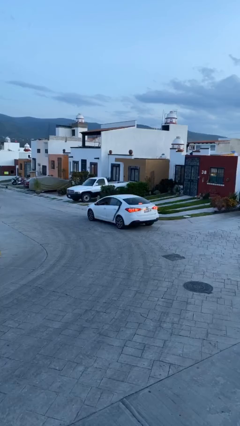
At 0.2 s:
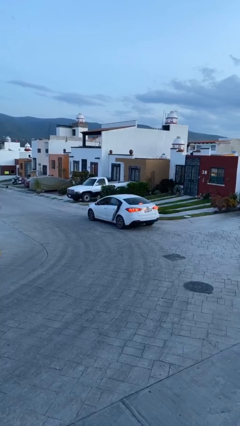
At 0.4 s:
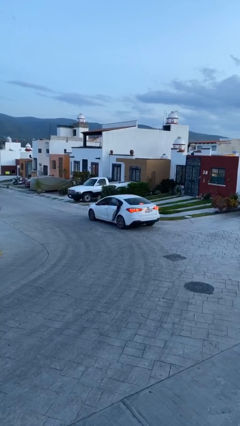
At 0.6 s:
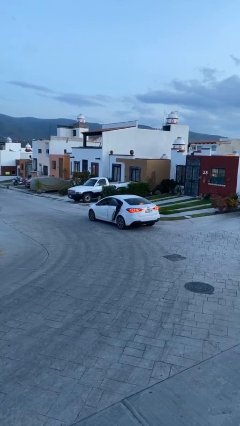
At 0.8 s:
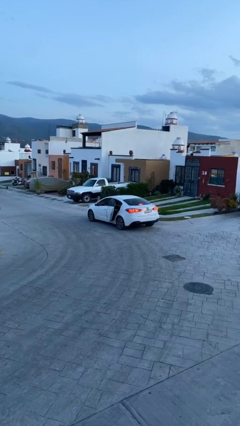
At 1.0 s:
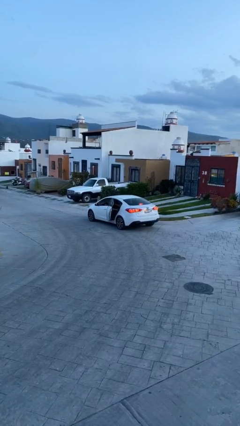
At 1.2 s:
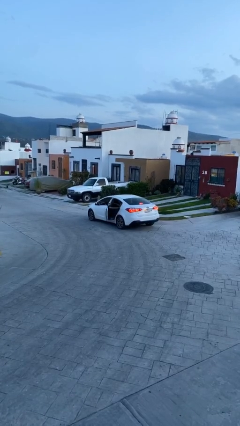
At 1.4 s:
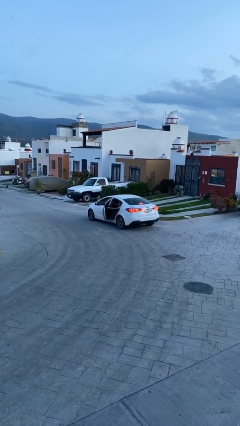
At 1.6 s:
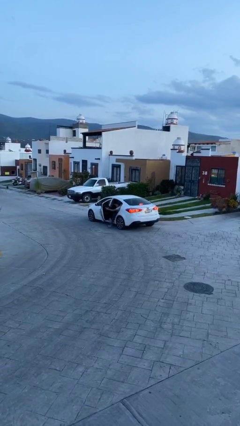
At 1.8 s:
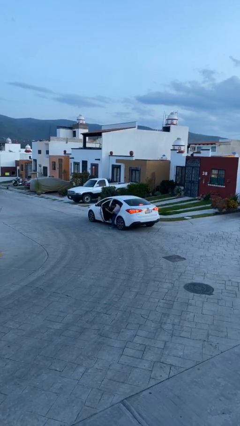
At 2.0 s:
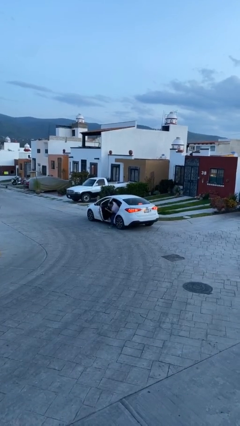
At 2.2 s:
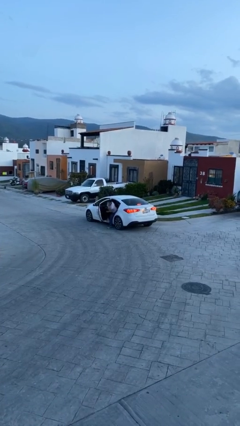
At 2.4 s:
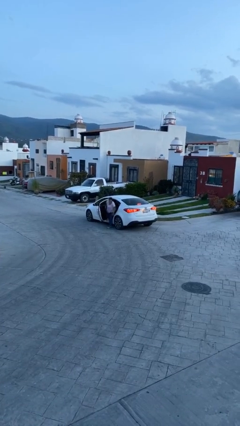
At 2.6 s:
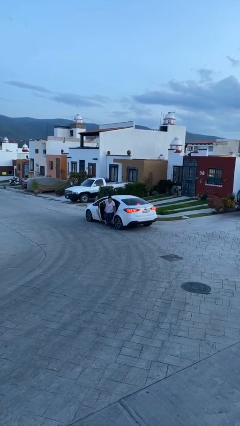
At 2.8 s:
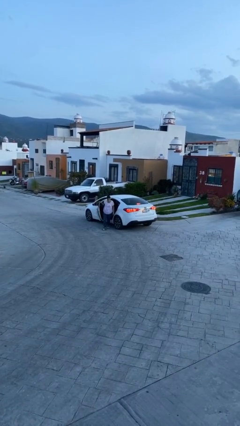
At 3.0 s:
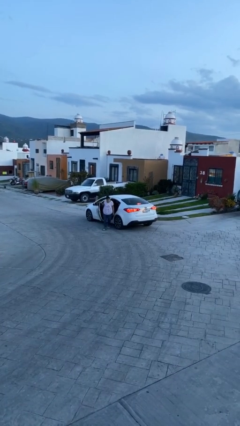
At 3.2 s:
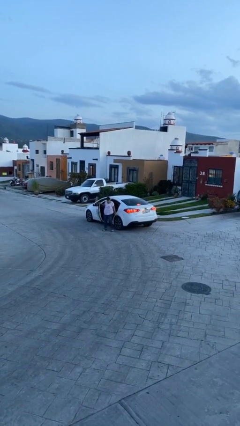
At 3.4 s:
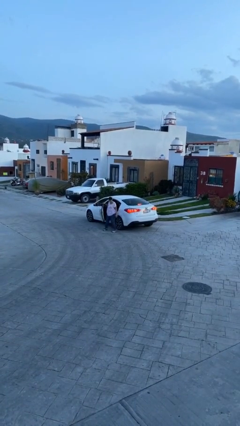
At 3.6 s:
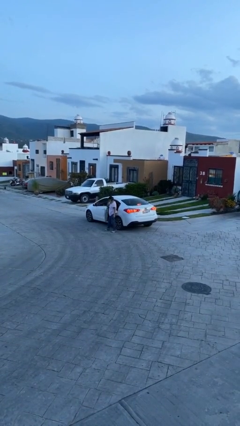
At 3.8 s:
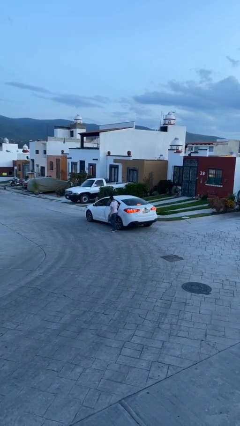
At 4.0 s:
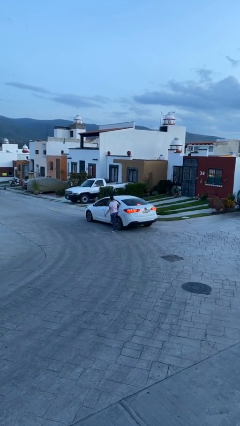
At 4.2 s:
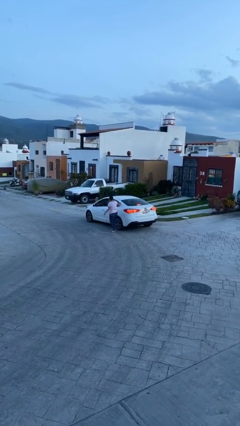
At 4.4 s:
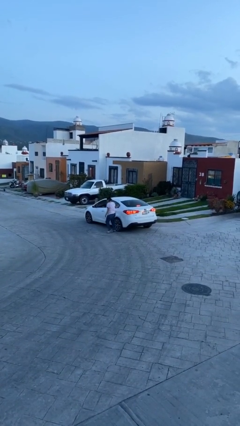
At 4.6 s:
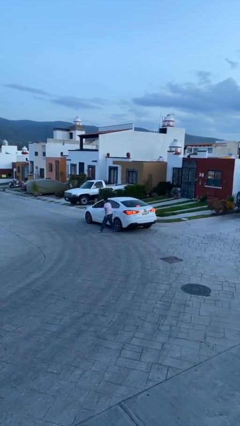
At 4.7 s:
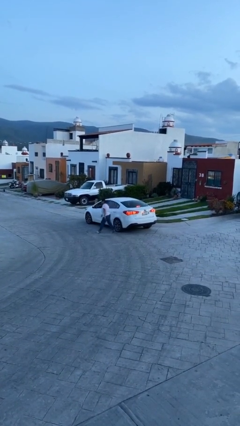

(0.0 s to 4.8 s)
car drops off person

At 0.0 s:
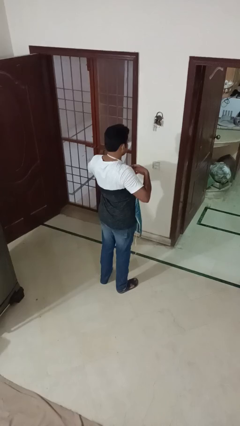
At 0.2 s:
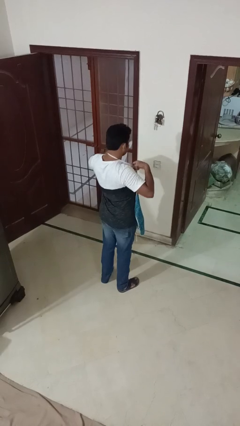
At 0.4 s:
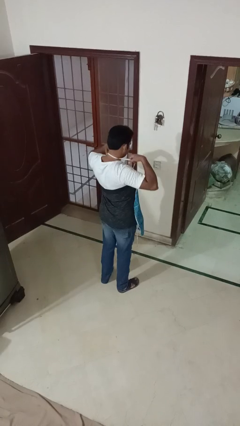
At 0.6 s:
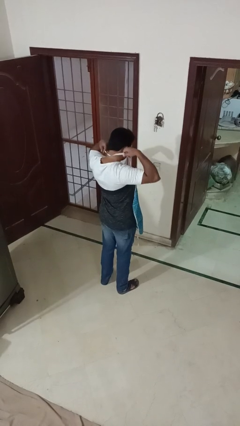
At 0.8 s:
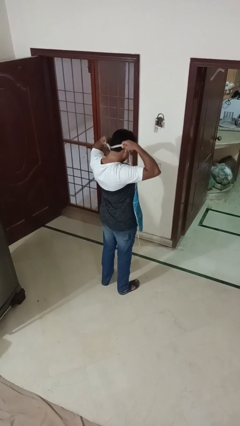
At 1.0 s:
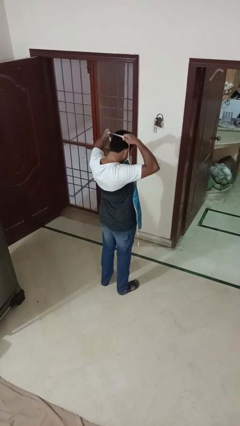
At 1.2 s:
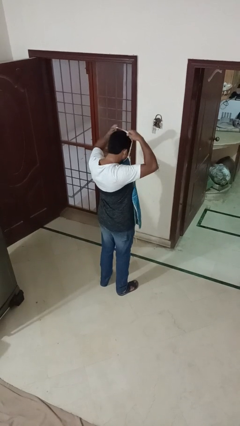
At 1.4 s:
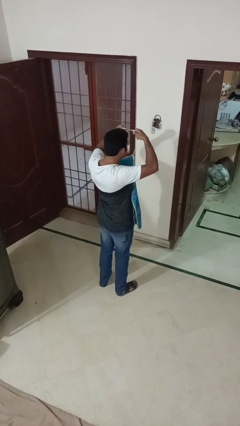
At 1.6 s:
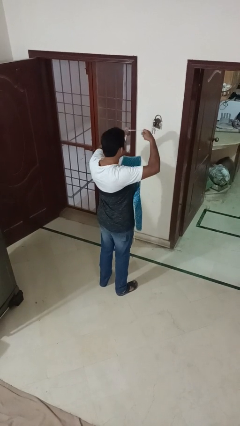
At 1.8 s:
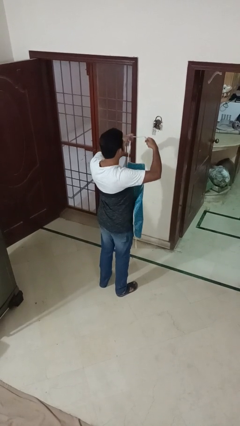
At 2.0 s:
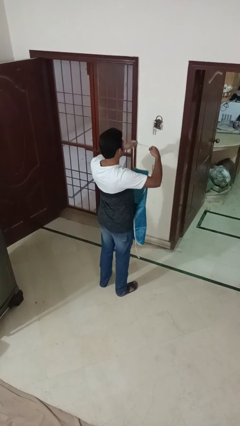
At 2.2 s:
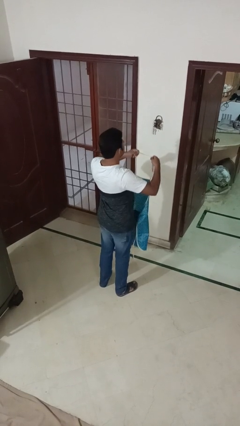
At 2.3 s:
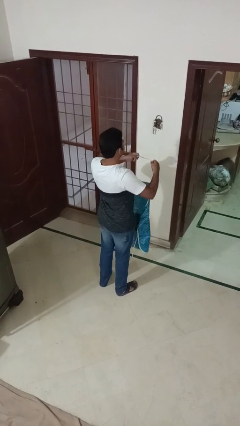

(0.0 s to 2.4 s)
person takes off apron

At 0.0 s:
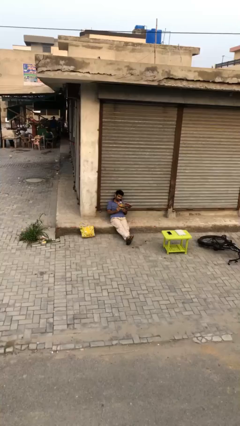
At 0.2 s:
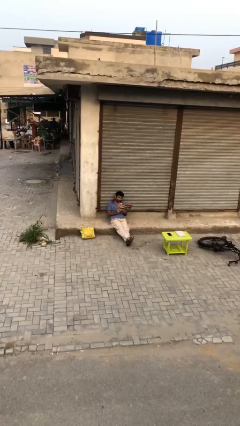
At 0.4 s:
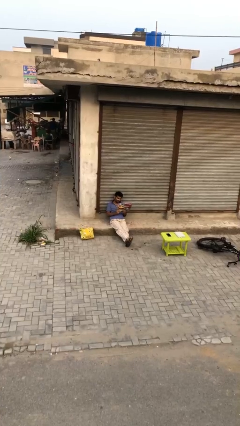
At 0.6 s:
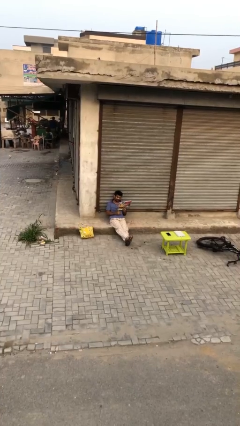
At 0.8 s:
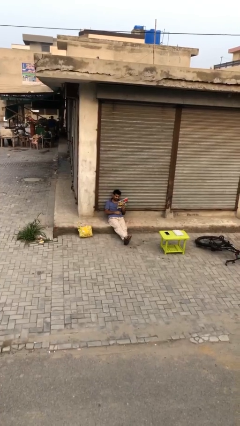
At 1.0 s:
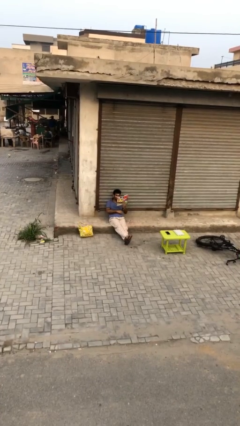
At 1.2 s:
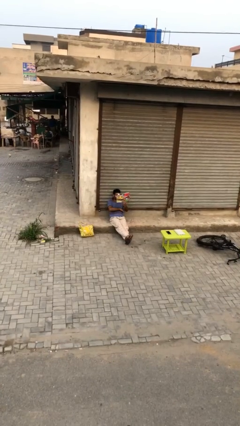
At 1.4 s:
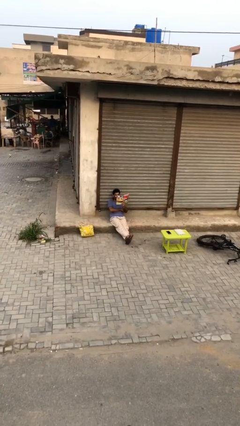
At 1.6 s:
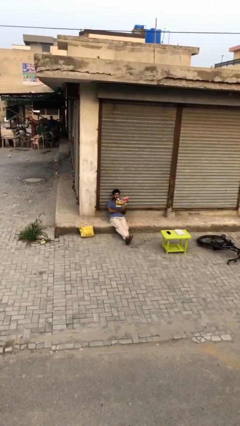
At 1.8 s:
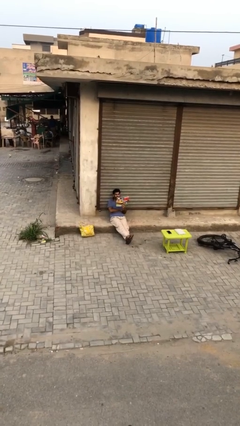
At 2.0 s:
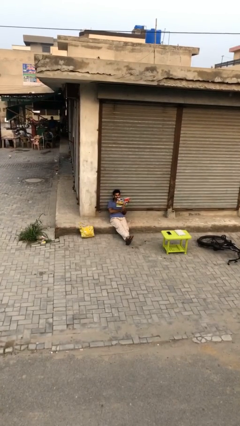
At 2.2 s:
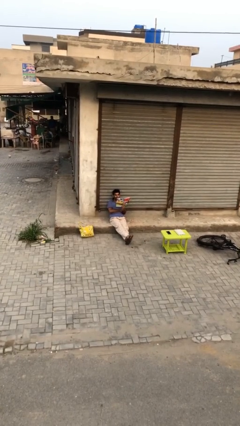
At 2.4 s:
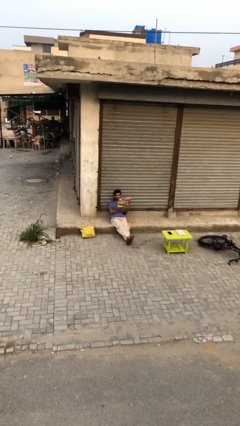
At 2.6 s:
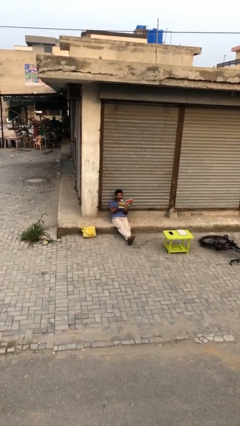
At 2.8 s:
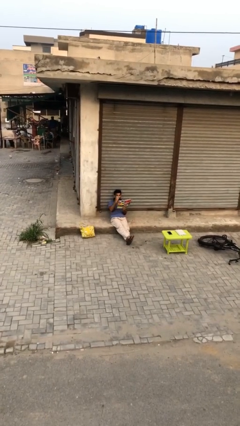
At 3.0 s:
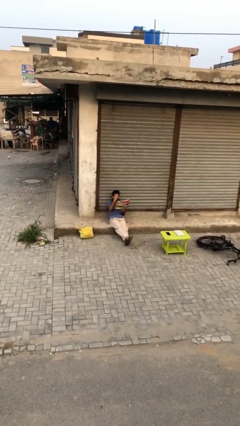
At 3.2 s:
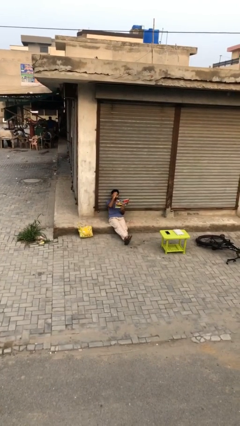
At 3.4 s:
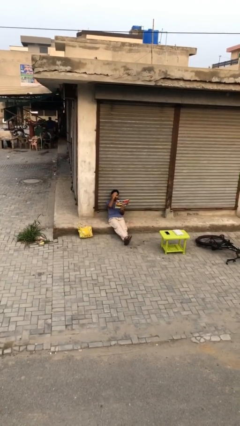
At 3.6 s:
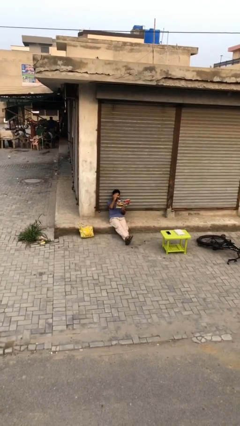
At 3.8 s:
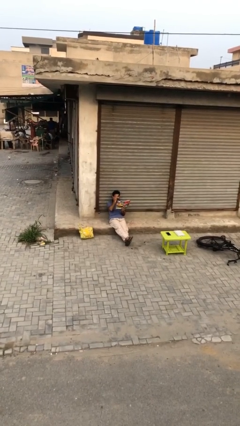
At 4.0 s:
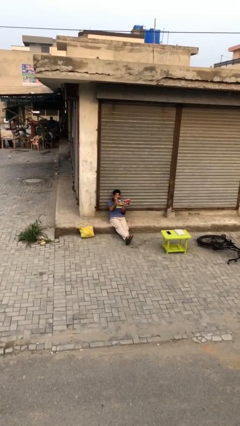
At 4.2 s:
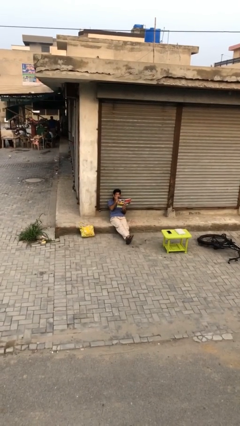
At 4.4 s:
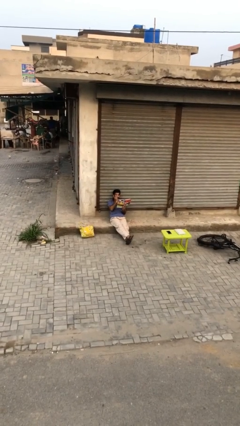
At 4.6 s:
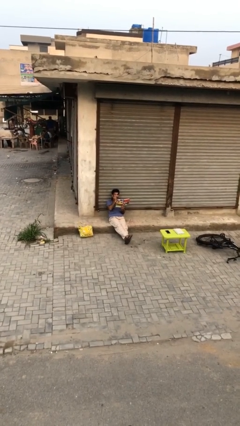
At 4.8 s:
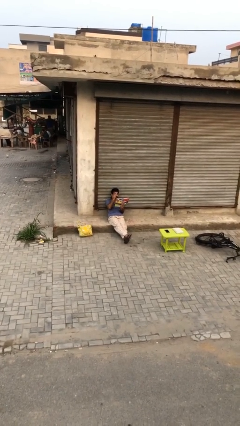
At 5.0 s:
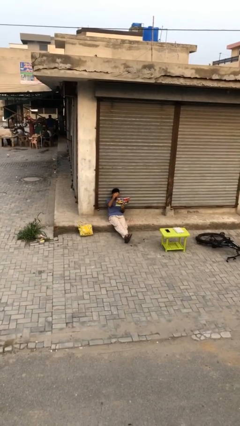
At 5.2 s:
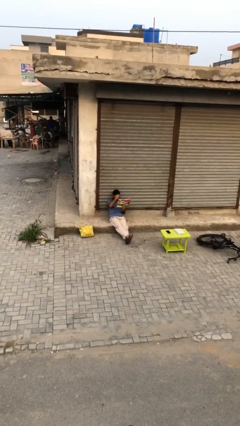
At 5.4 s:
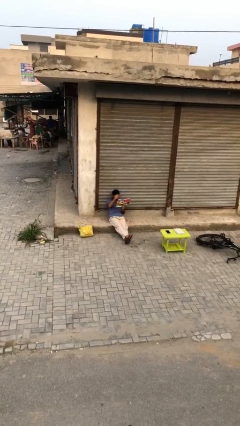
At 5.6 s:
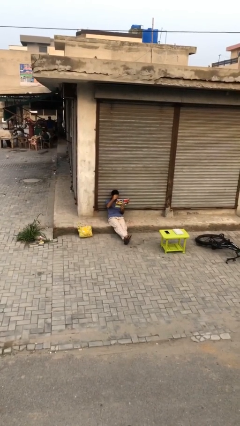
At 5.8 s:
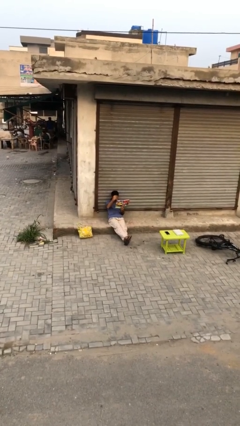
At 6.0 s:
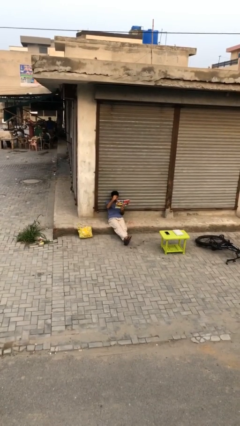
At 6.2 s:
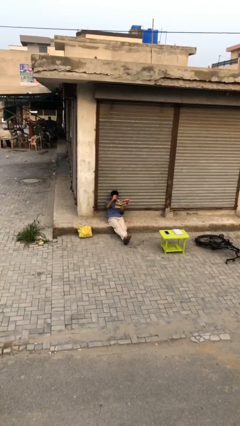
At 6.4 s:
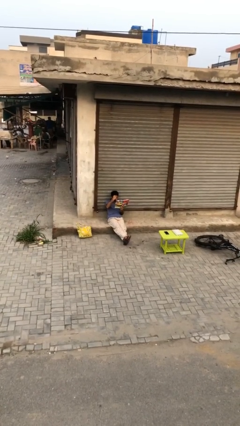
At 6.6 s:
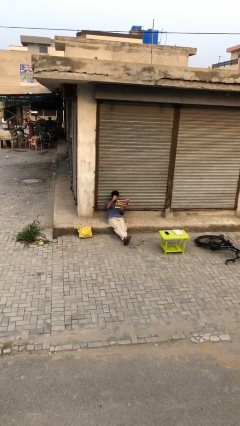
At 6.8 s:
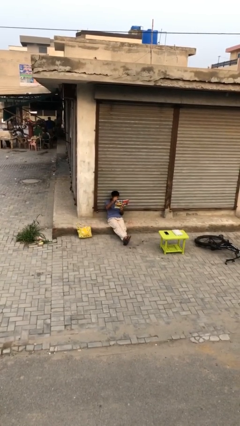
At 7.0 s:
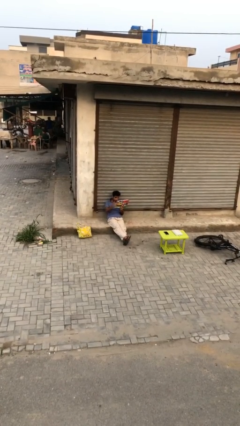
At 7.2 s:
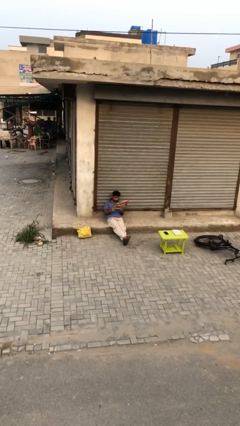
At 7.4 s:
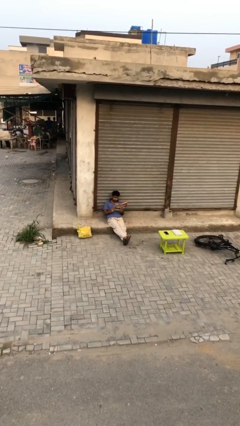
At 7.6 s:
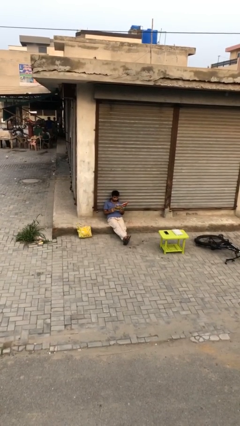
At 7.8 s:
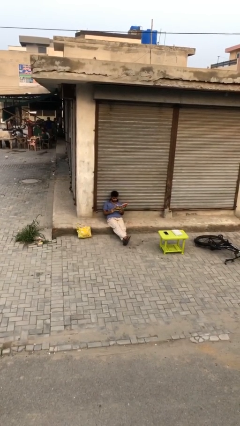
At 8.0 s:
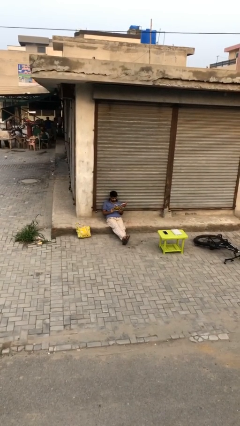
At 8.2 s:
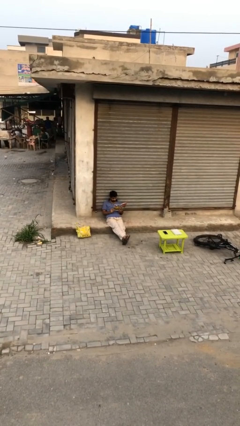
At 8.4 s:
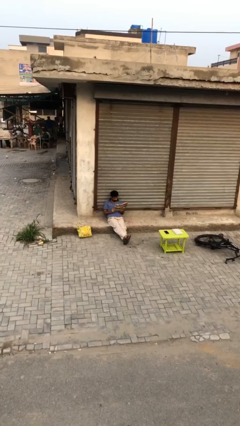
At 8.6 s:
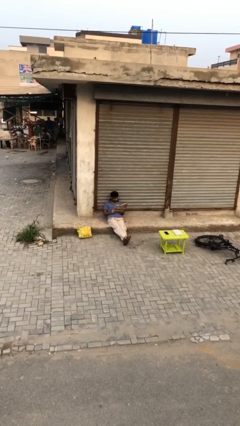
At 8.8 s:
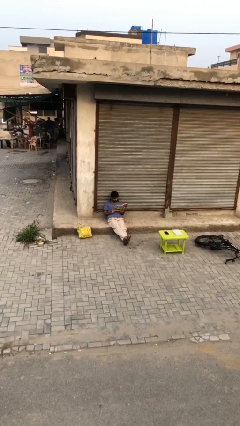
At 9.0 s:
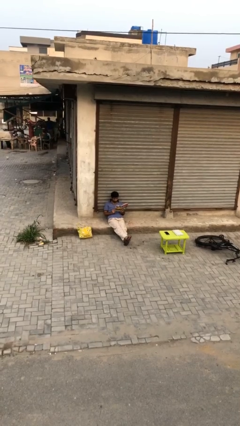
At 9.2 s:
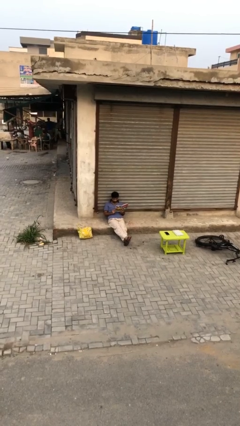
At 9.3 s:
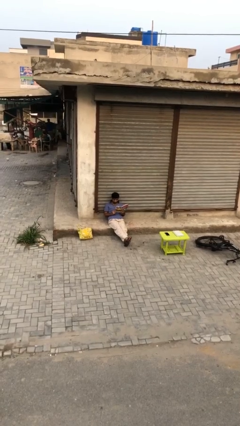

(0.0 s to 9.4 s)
person reads document

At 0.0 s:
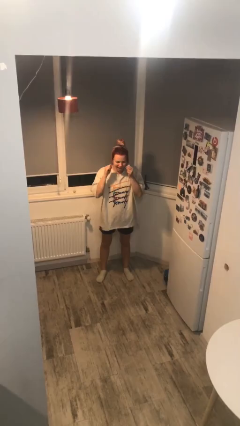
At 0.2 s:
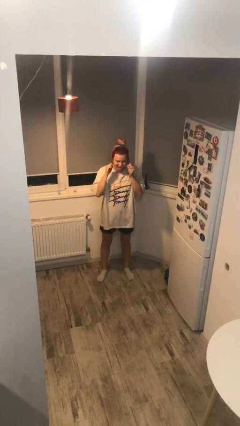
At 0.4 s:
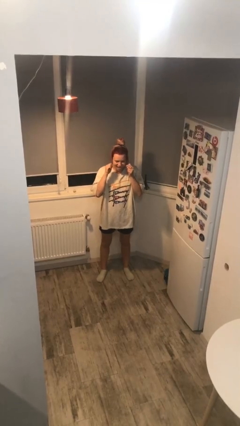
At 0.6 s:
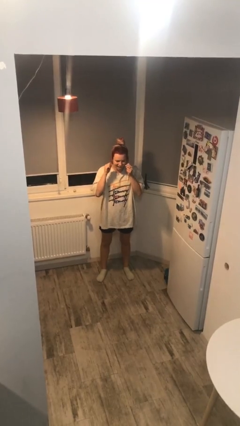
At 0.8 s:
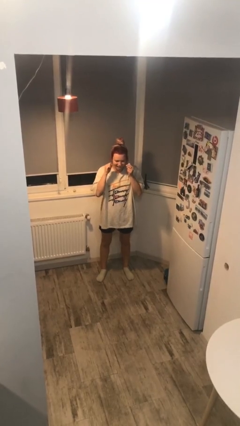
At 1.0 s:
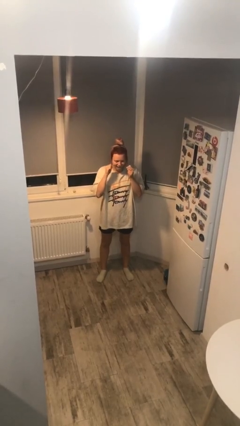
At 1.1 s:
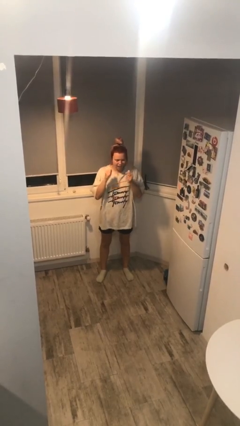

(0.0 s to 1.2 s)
person flosses
